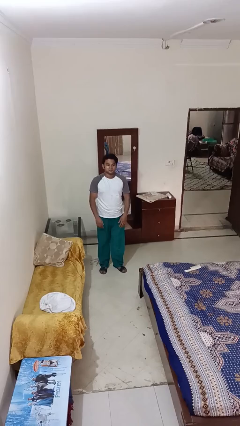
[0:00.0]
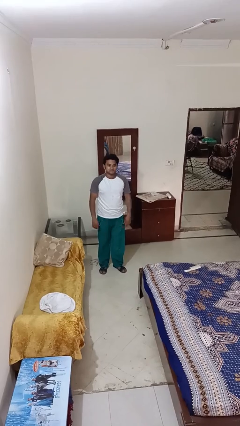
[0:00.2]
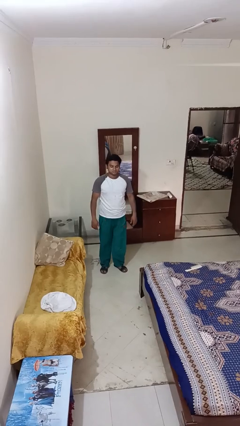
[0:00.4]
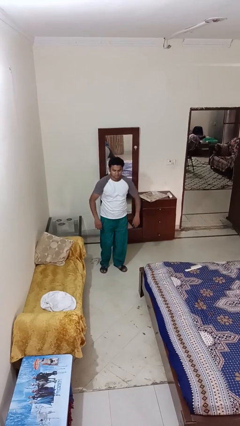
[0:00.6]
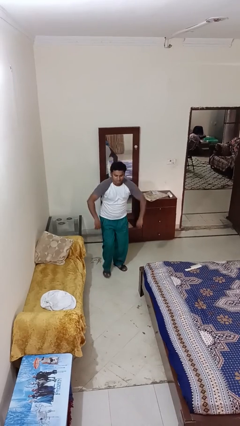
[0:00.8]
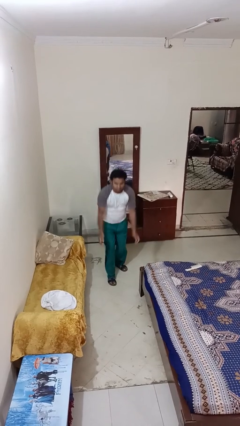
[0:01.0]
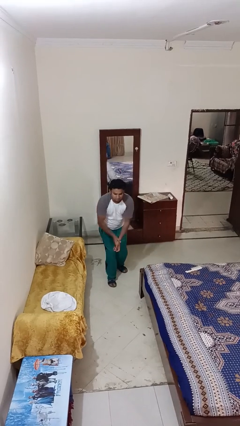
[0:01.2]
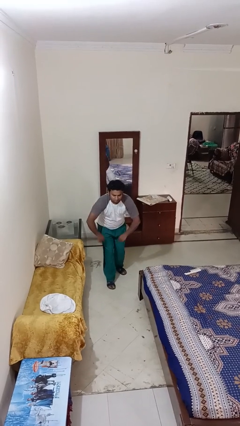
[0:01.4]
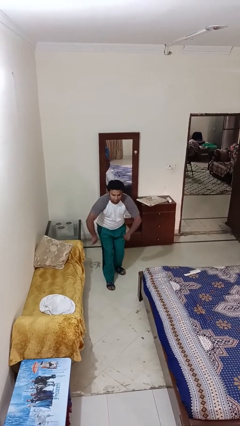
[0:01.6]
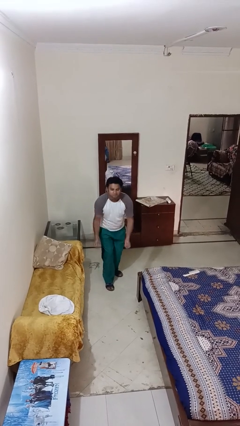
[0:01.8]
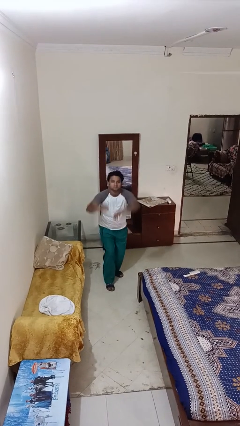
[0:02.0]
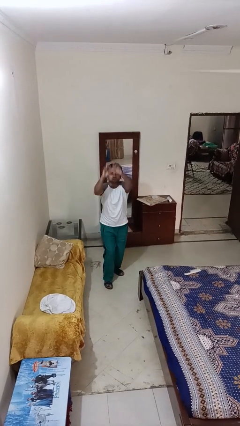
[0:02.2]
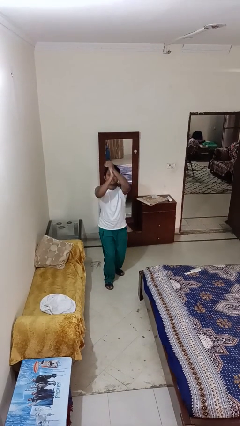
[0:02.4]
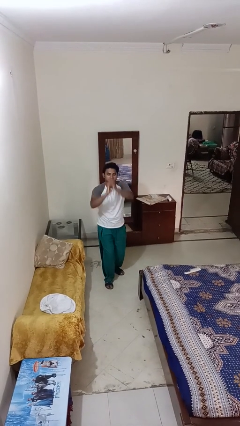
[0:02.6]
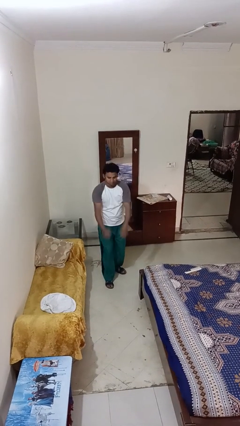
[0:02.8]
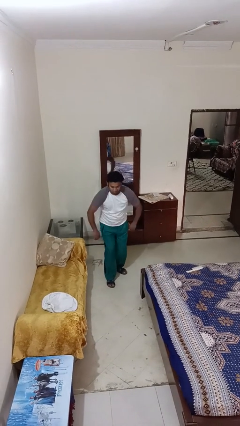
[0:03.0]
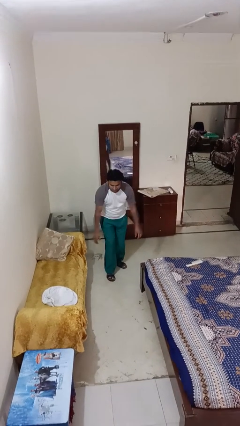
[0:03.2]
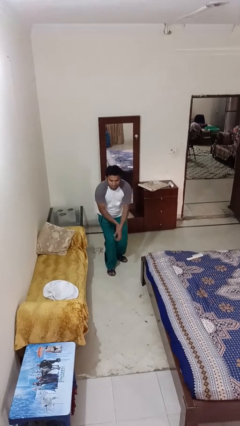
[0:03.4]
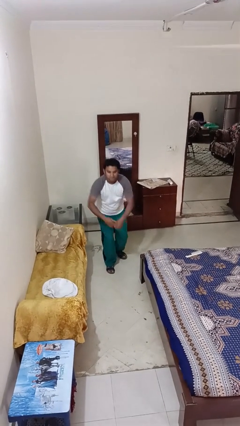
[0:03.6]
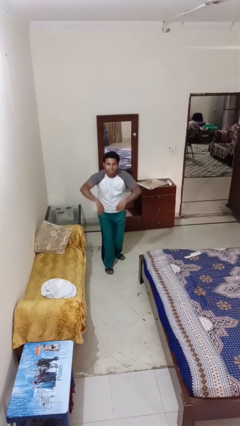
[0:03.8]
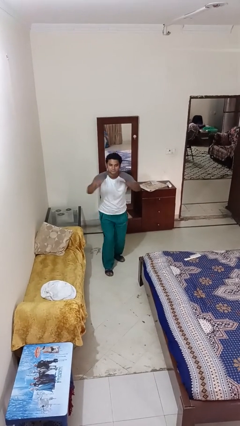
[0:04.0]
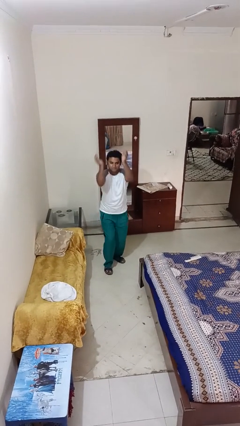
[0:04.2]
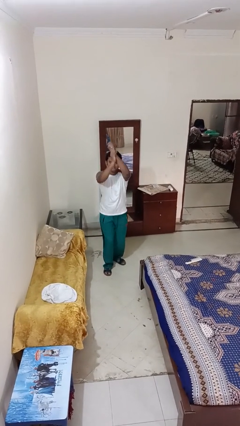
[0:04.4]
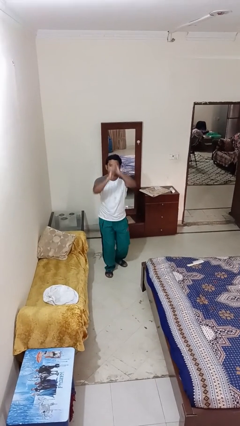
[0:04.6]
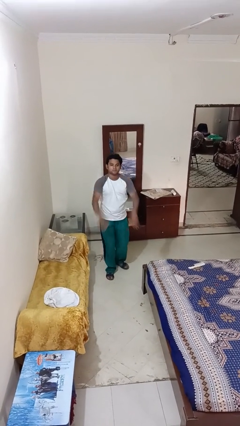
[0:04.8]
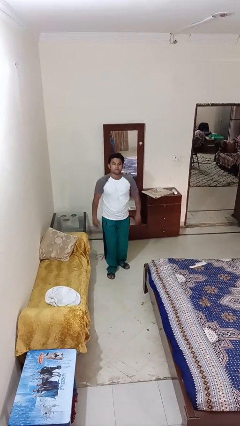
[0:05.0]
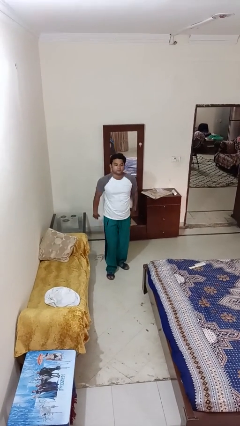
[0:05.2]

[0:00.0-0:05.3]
person dances in place

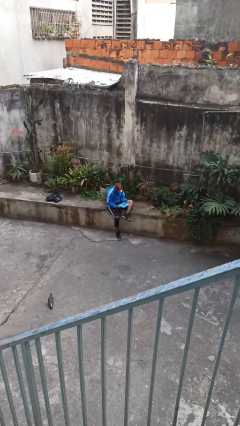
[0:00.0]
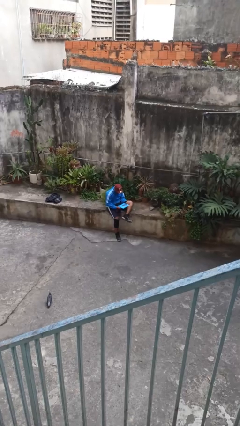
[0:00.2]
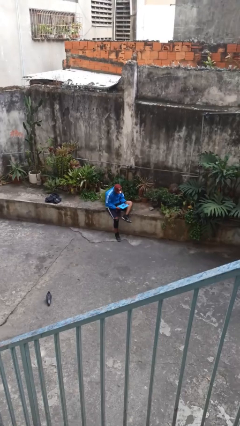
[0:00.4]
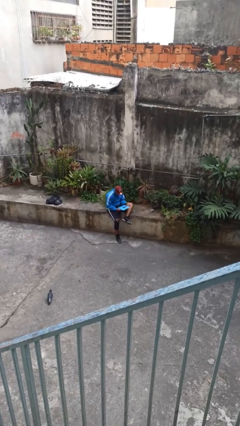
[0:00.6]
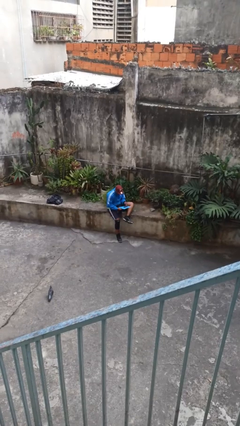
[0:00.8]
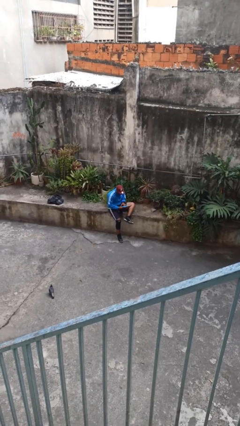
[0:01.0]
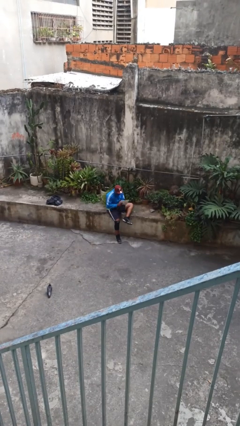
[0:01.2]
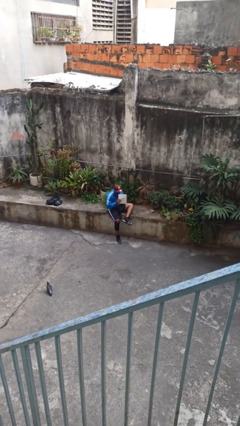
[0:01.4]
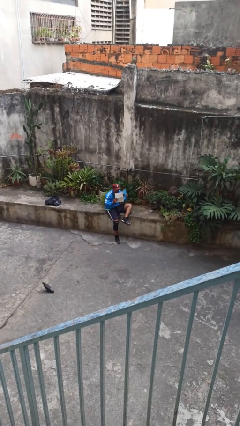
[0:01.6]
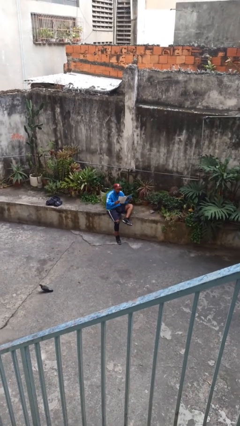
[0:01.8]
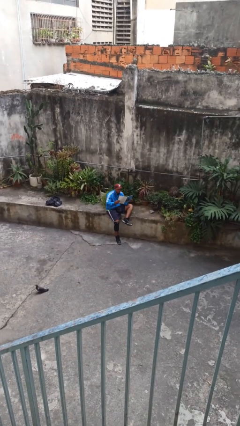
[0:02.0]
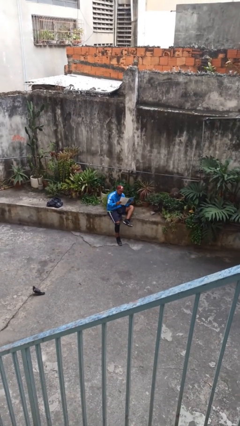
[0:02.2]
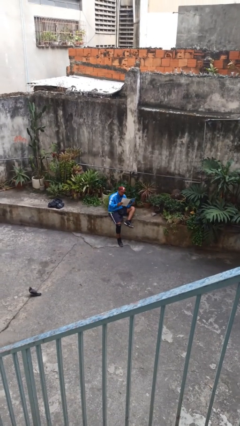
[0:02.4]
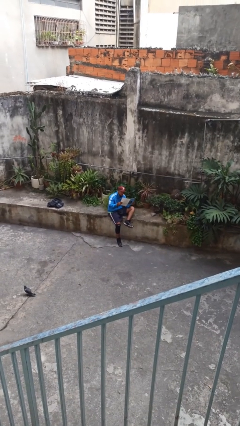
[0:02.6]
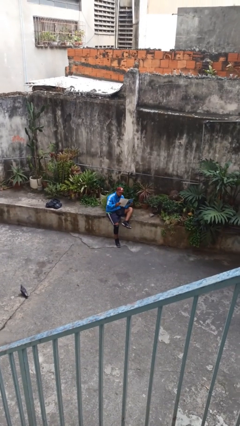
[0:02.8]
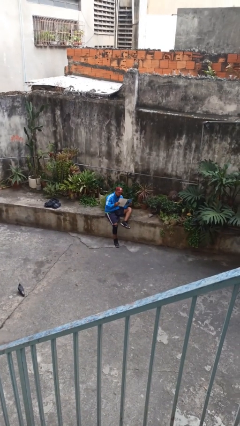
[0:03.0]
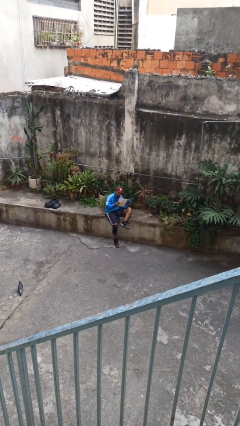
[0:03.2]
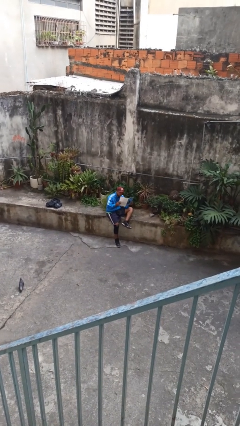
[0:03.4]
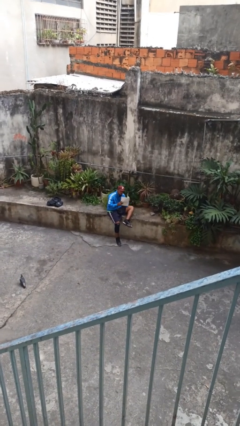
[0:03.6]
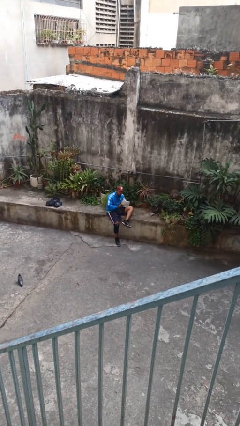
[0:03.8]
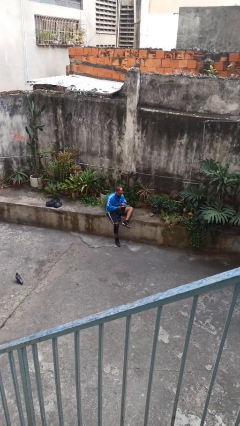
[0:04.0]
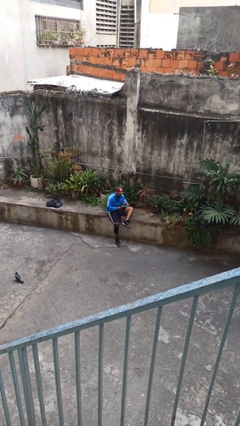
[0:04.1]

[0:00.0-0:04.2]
person reads document

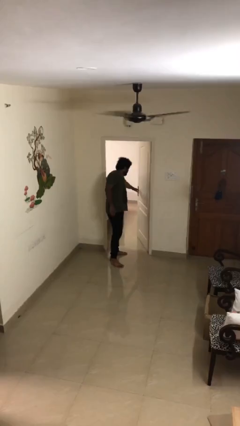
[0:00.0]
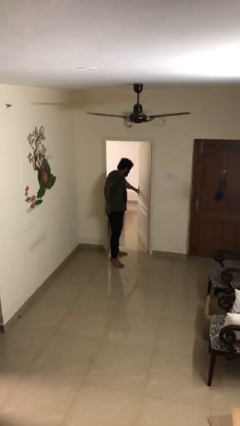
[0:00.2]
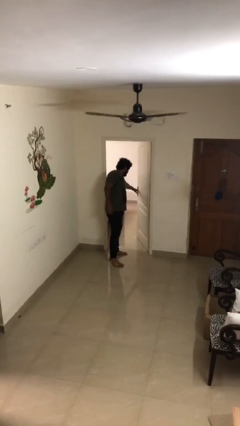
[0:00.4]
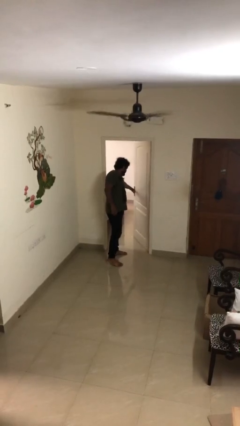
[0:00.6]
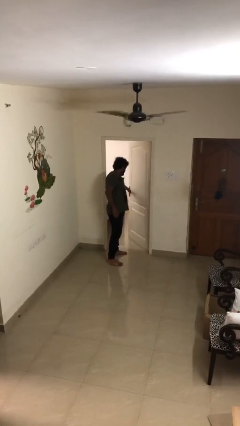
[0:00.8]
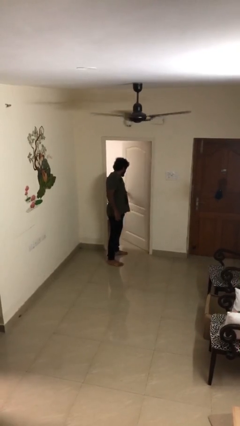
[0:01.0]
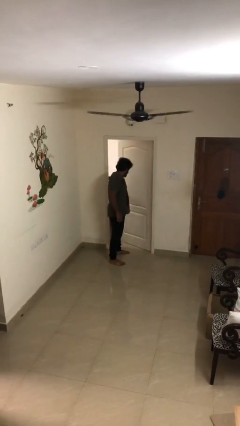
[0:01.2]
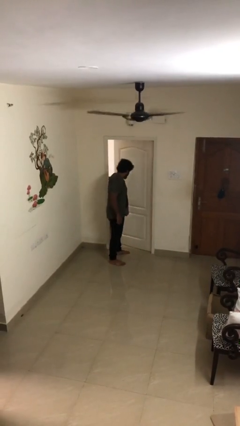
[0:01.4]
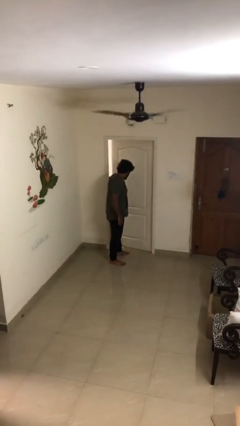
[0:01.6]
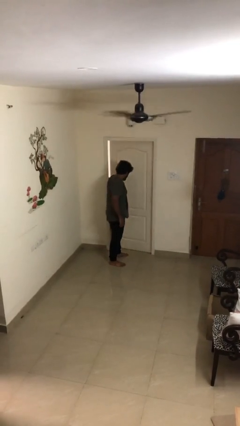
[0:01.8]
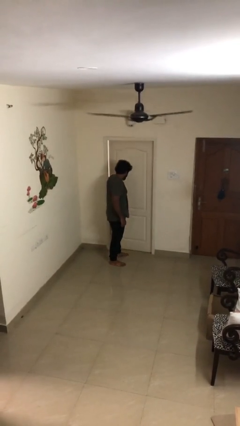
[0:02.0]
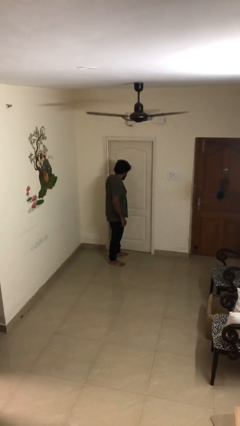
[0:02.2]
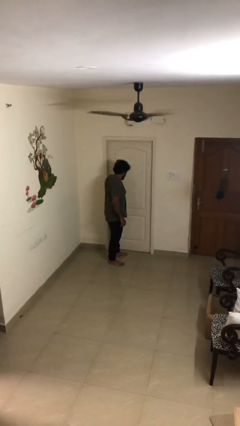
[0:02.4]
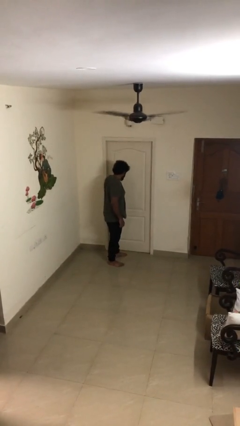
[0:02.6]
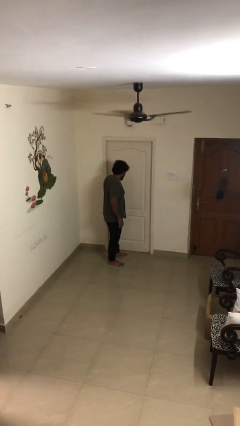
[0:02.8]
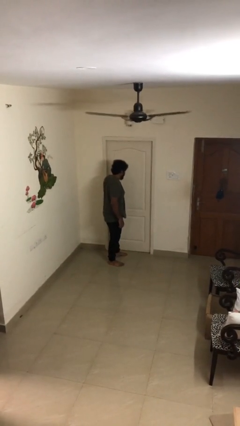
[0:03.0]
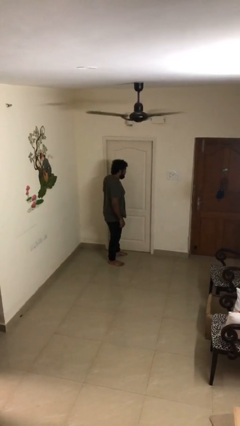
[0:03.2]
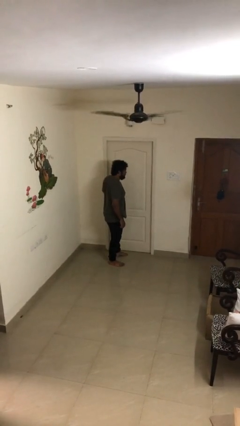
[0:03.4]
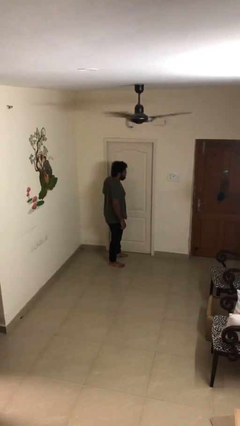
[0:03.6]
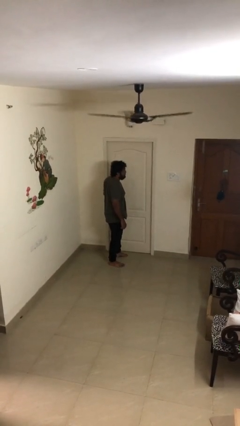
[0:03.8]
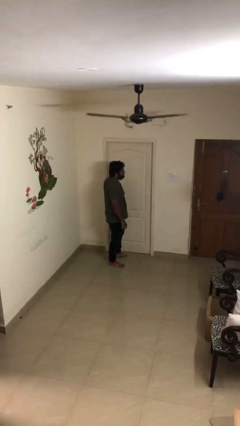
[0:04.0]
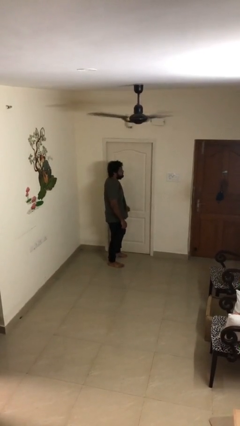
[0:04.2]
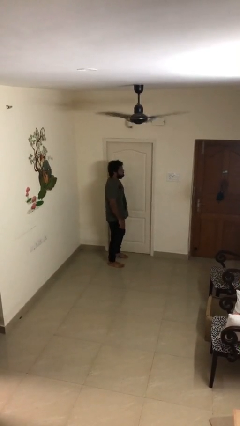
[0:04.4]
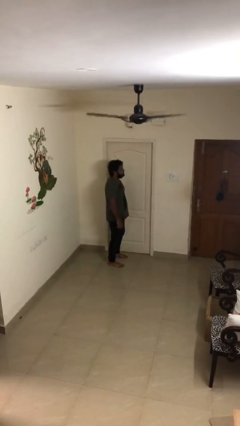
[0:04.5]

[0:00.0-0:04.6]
person closes facility door

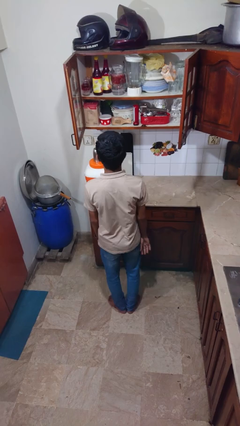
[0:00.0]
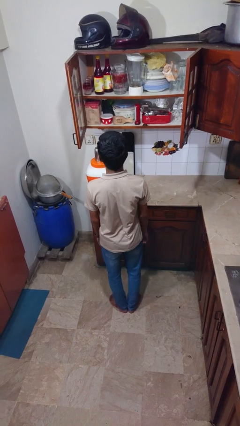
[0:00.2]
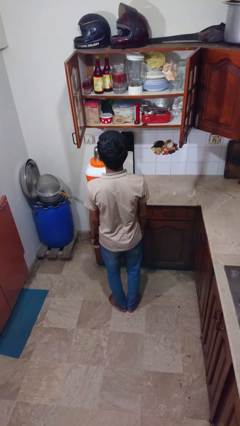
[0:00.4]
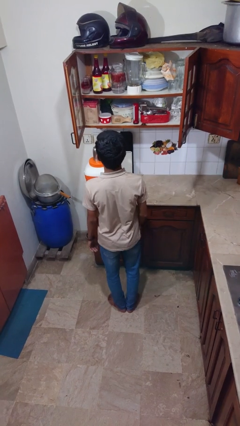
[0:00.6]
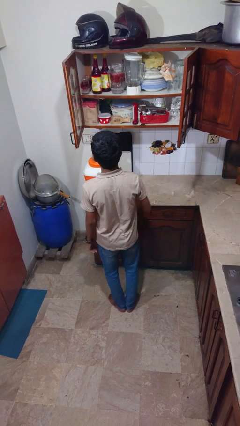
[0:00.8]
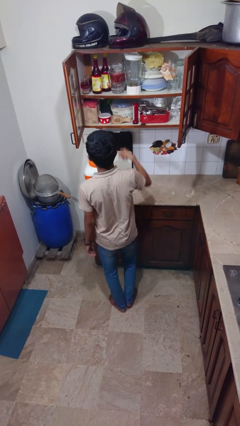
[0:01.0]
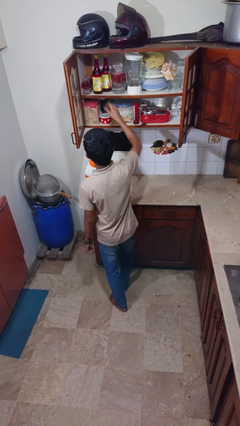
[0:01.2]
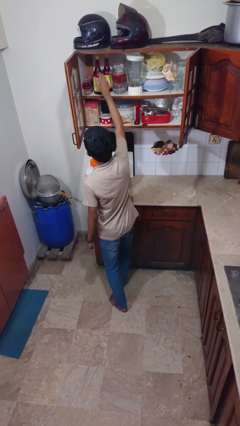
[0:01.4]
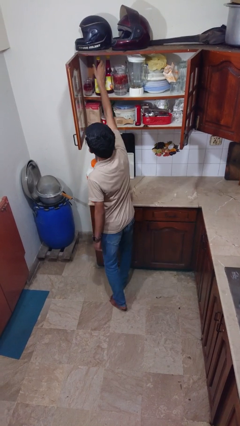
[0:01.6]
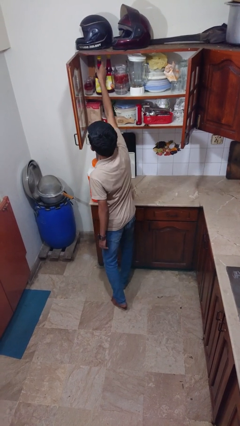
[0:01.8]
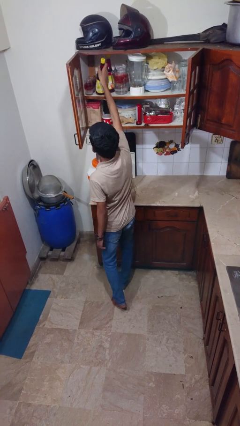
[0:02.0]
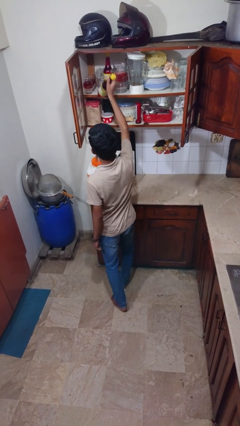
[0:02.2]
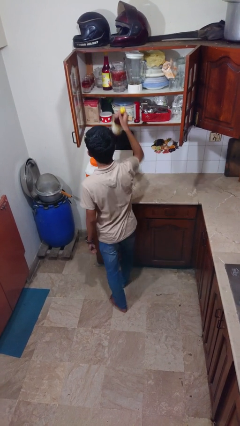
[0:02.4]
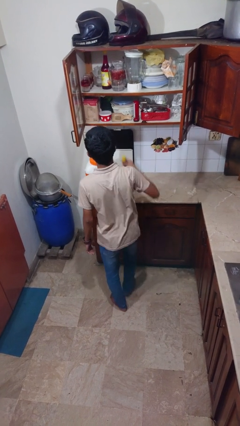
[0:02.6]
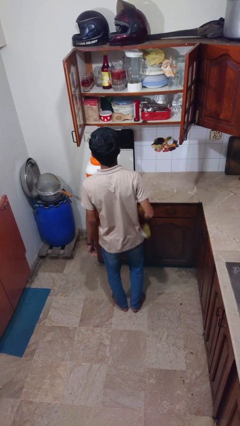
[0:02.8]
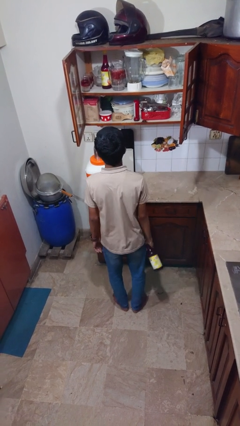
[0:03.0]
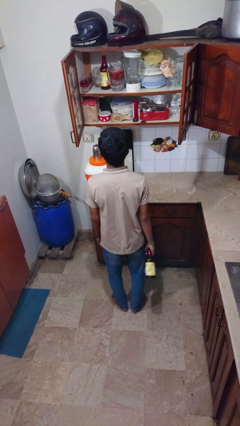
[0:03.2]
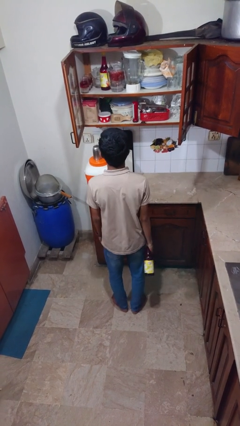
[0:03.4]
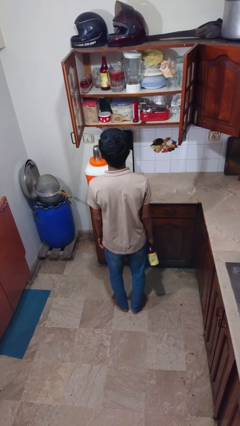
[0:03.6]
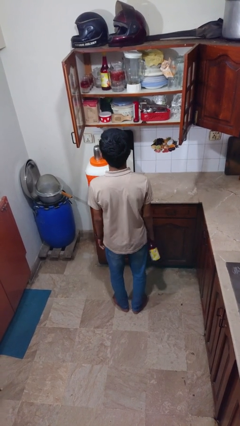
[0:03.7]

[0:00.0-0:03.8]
person picks up object from cabinet

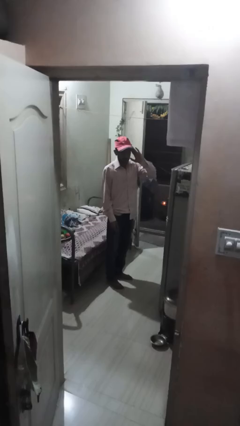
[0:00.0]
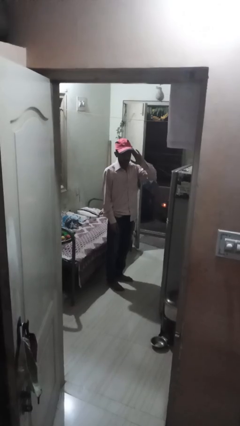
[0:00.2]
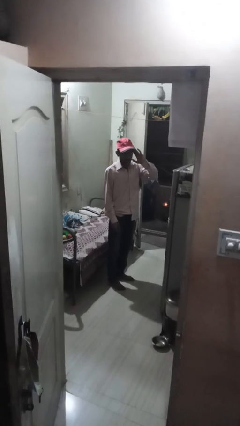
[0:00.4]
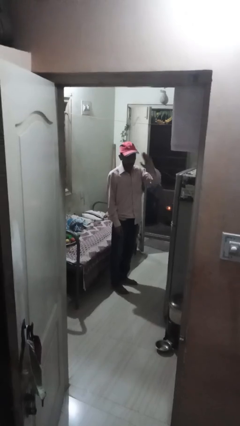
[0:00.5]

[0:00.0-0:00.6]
person salutes
